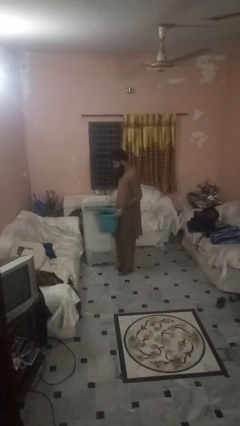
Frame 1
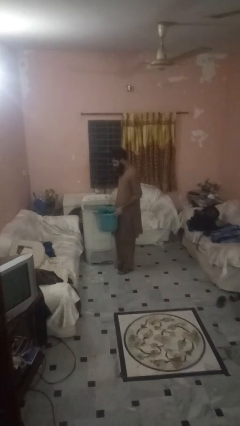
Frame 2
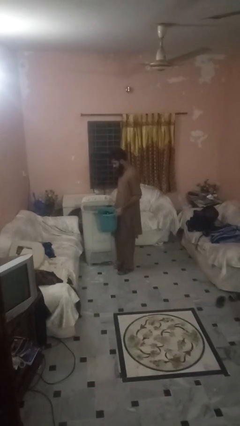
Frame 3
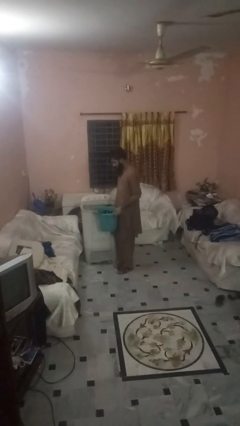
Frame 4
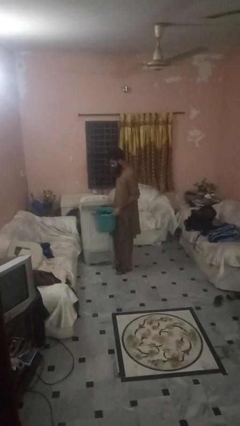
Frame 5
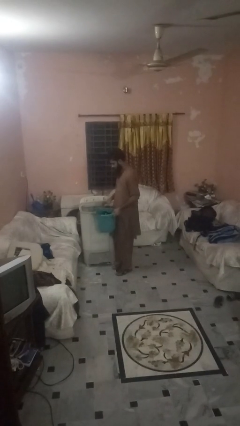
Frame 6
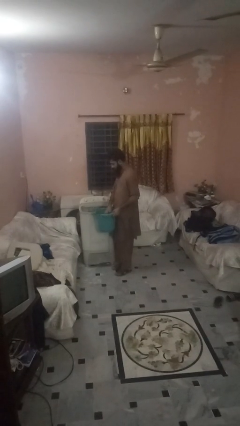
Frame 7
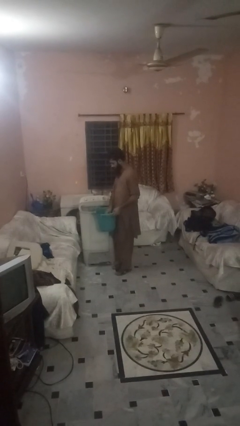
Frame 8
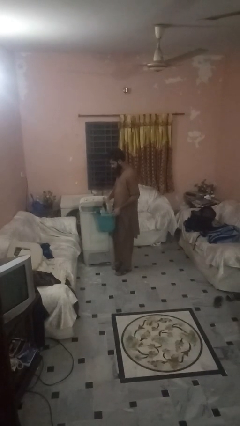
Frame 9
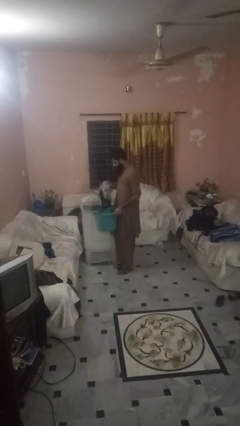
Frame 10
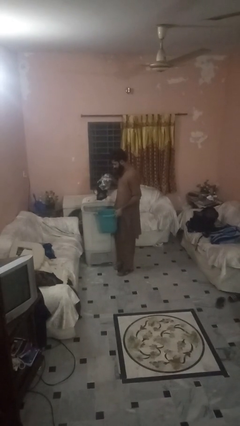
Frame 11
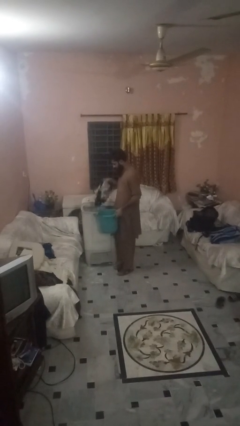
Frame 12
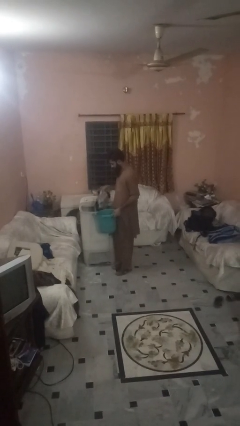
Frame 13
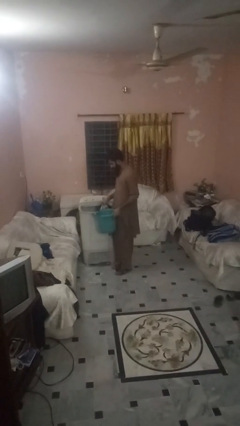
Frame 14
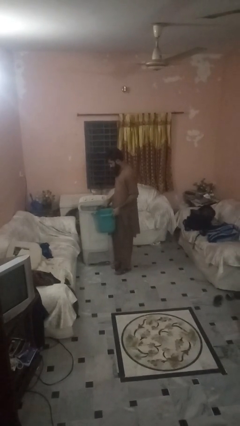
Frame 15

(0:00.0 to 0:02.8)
person loads clotheswasher

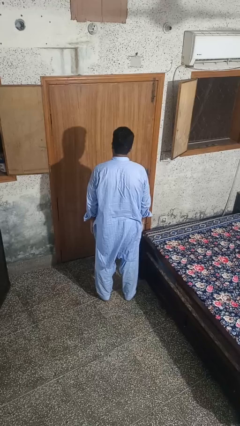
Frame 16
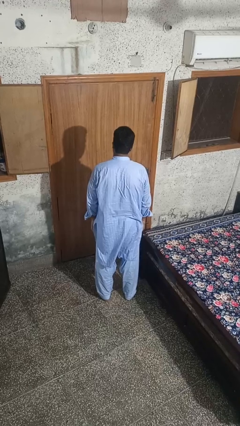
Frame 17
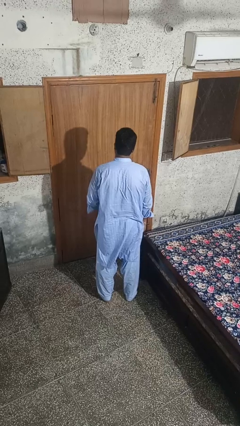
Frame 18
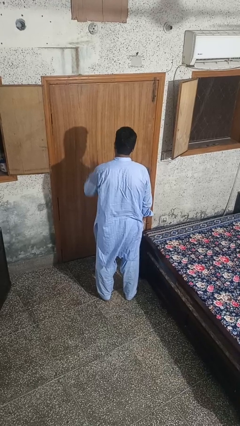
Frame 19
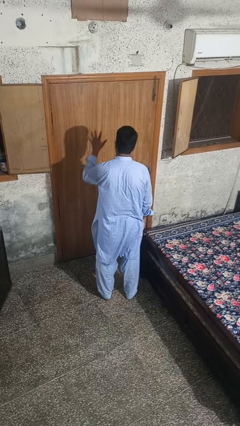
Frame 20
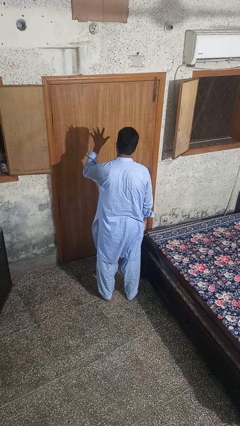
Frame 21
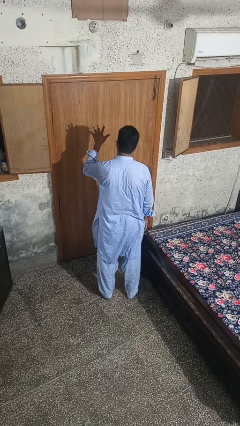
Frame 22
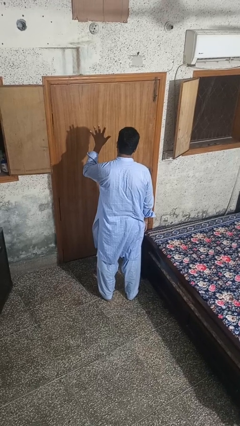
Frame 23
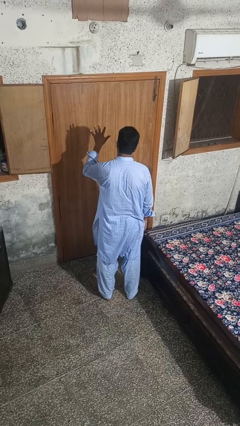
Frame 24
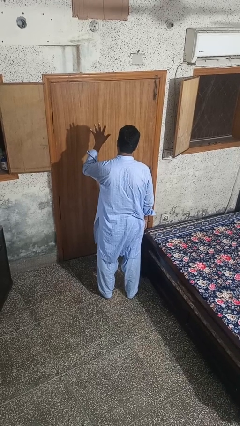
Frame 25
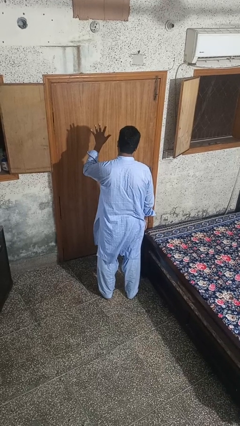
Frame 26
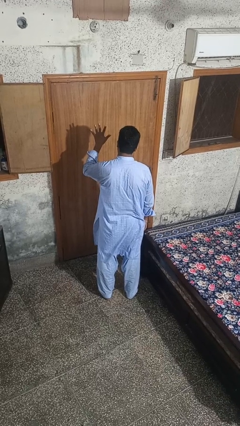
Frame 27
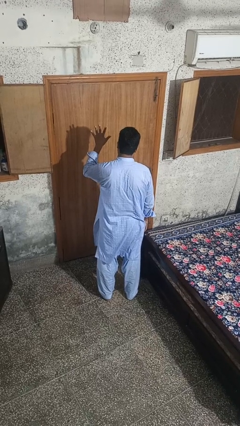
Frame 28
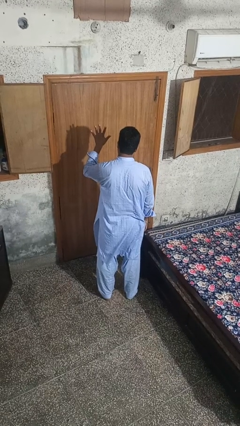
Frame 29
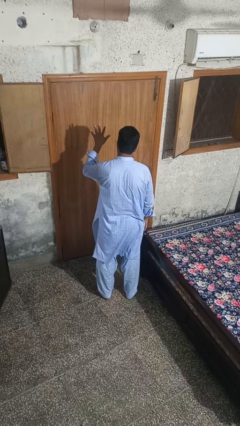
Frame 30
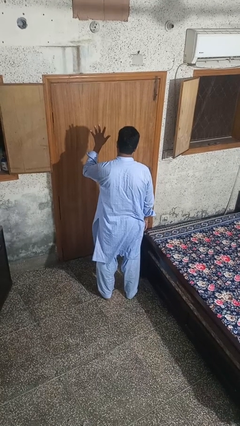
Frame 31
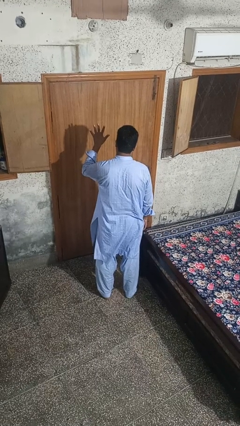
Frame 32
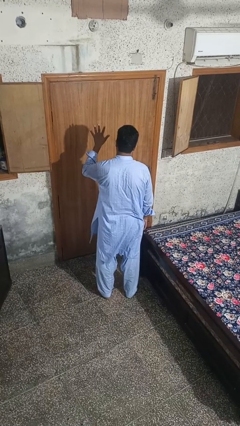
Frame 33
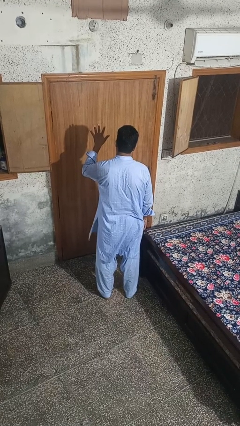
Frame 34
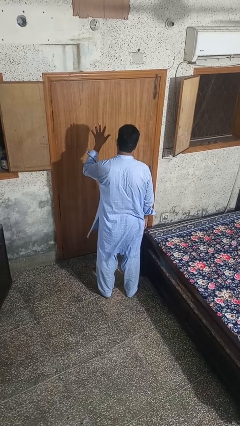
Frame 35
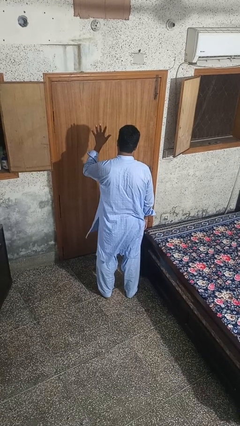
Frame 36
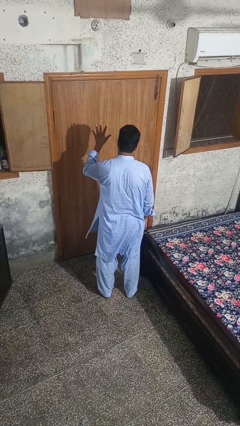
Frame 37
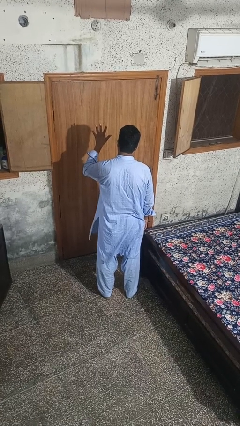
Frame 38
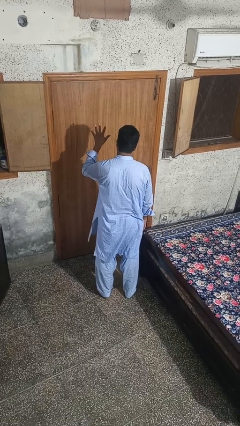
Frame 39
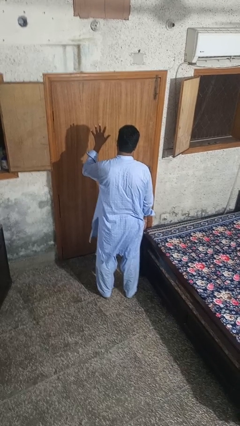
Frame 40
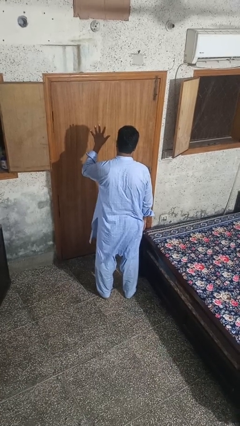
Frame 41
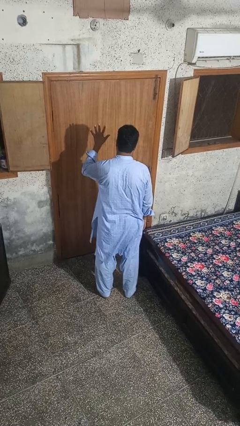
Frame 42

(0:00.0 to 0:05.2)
person gestures number five

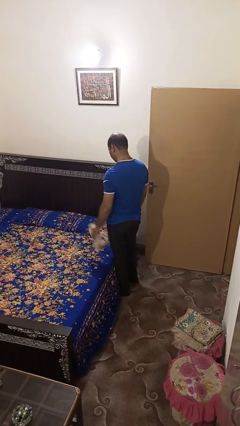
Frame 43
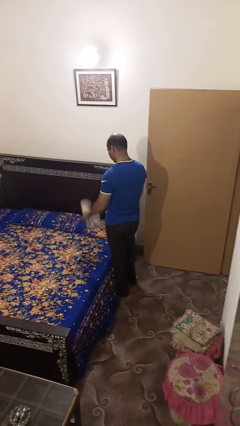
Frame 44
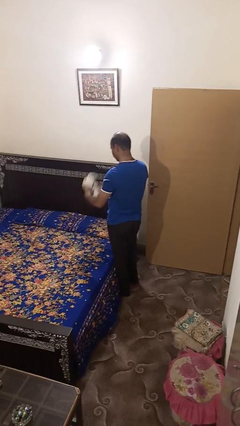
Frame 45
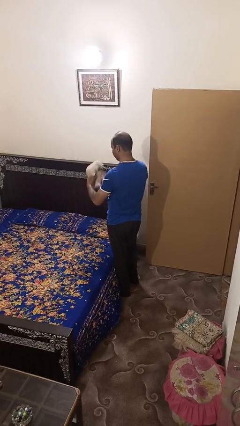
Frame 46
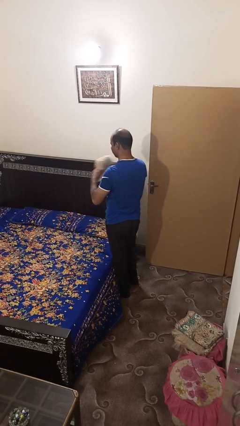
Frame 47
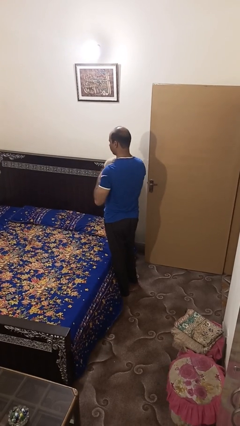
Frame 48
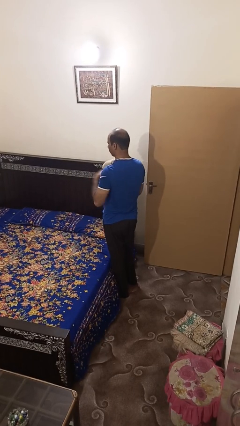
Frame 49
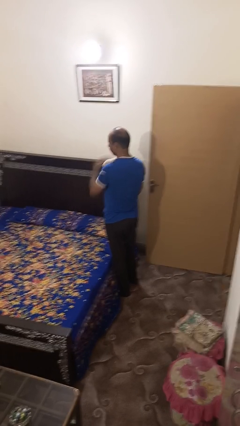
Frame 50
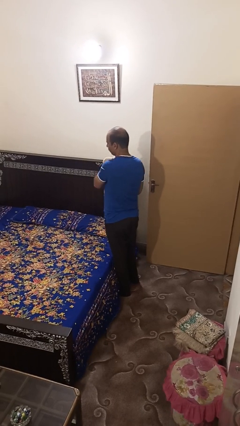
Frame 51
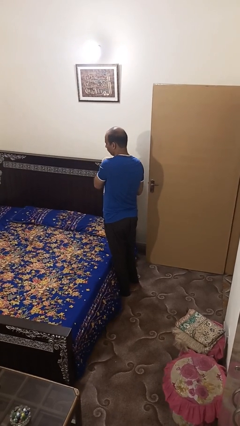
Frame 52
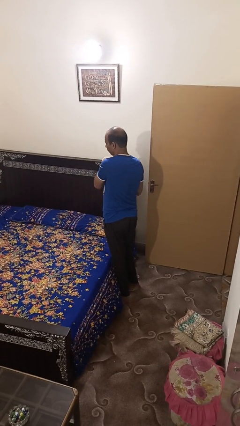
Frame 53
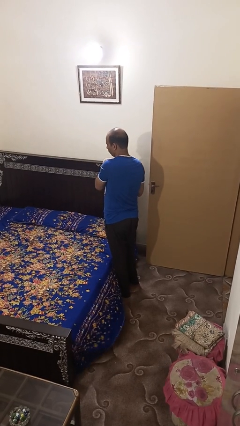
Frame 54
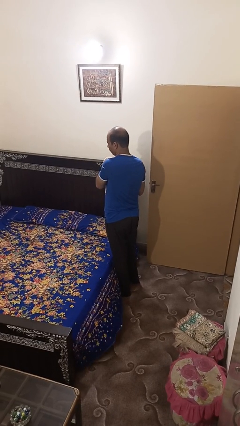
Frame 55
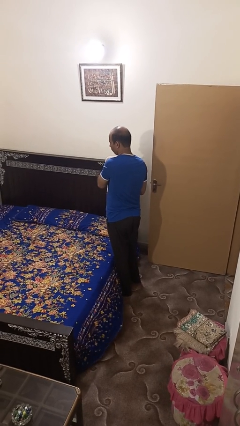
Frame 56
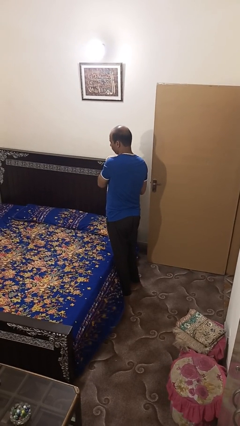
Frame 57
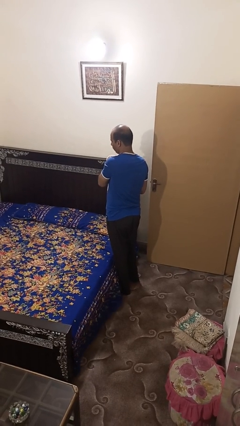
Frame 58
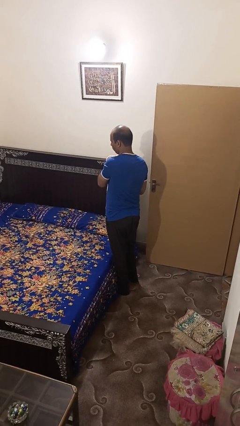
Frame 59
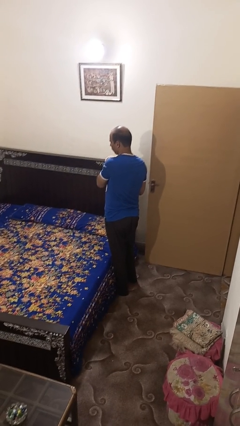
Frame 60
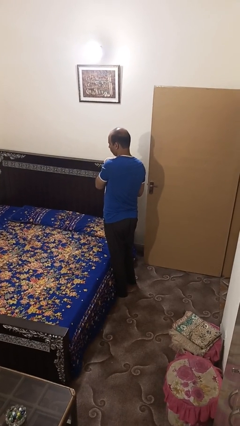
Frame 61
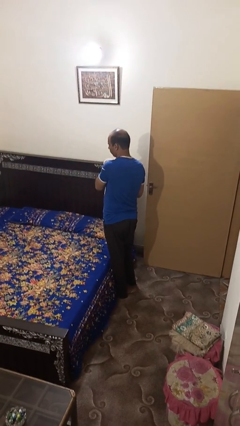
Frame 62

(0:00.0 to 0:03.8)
person hugs stuffed animal

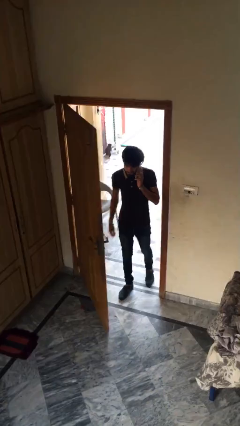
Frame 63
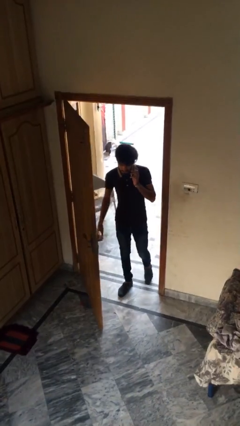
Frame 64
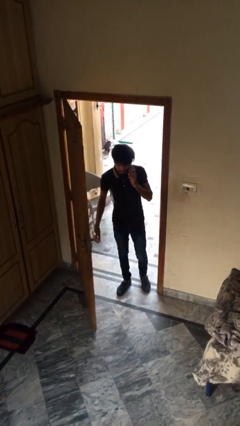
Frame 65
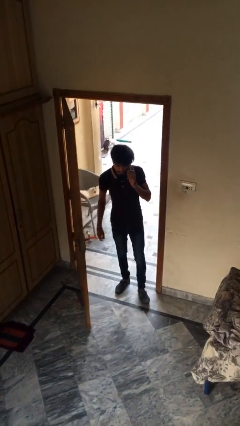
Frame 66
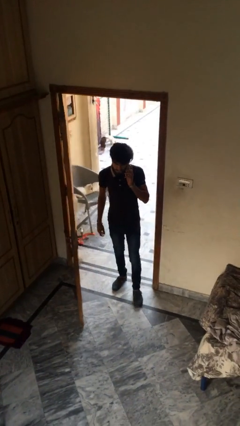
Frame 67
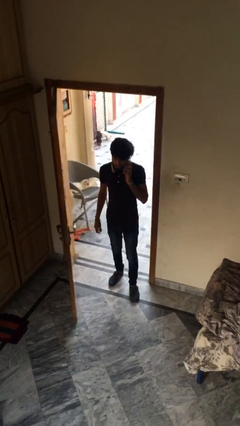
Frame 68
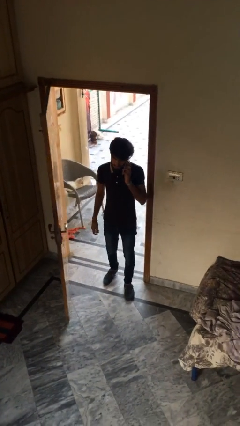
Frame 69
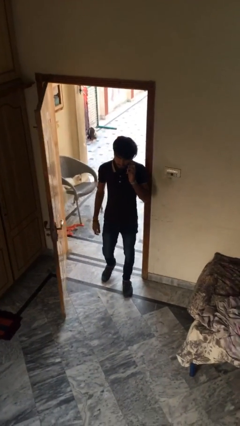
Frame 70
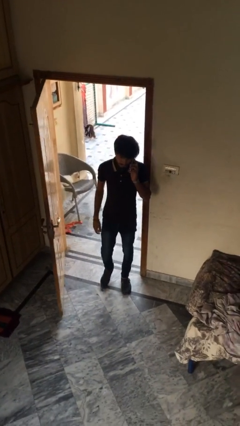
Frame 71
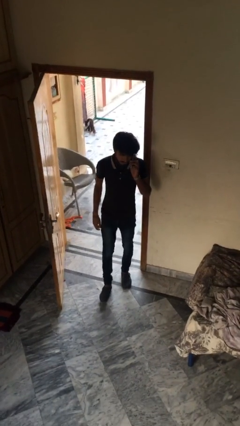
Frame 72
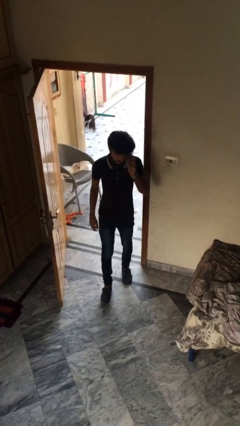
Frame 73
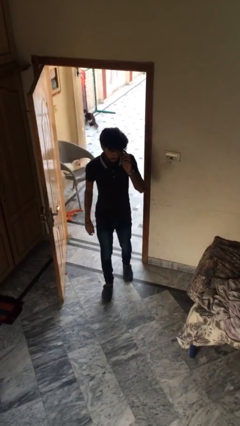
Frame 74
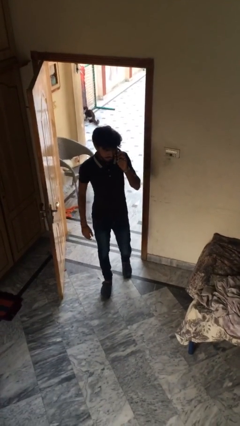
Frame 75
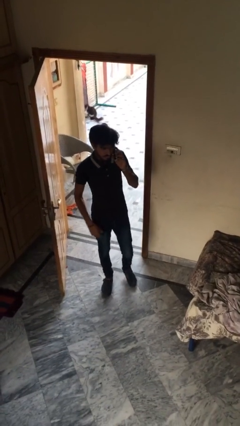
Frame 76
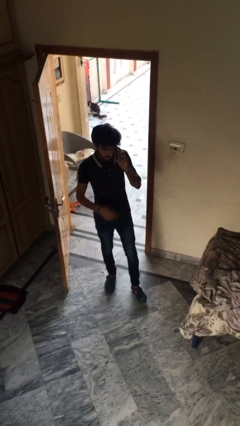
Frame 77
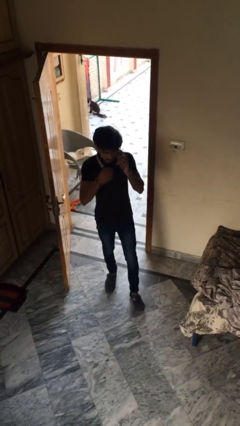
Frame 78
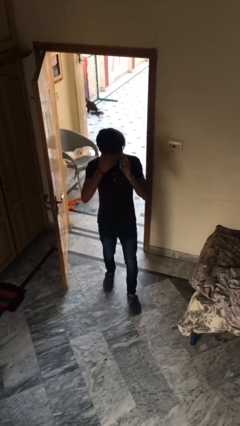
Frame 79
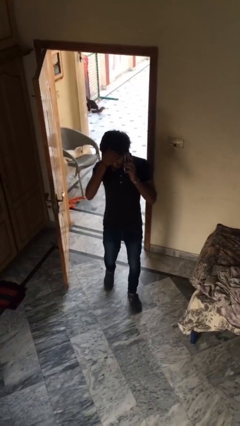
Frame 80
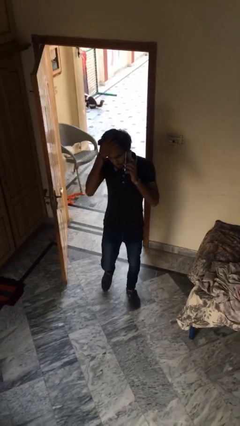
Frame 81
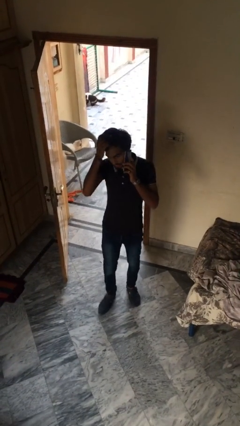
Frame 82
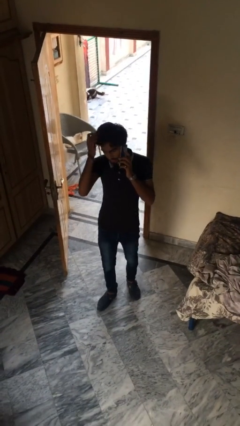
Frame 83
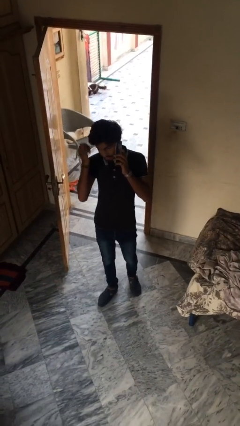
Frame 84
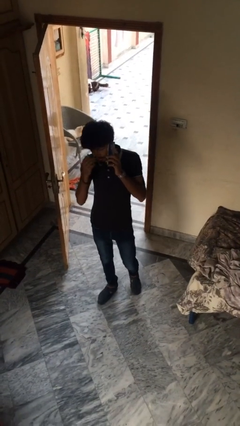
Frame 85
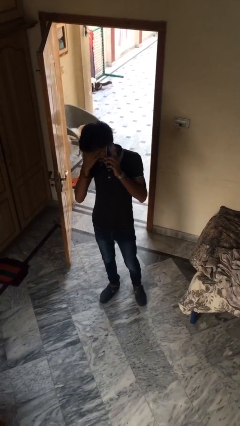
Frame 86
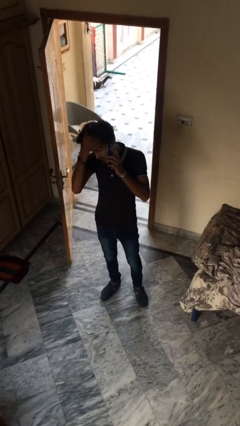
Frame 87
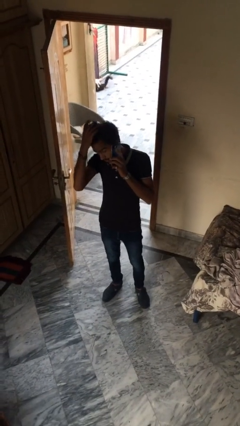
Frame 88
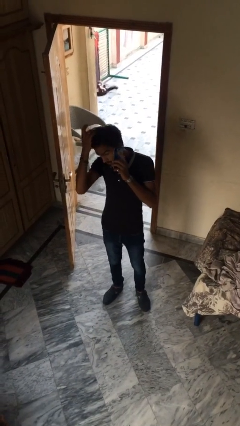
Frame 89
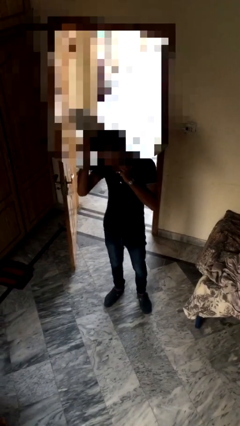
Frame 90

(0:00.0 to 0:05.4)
person enters scene through structure

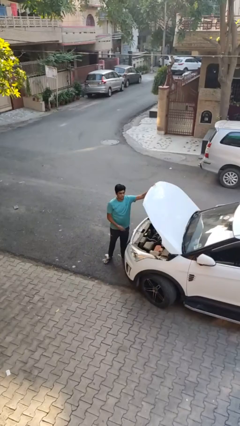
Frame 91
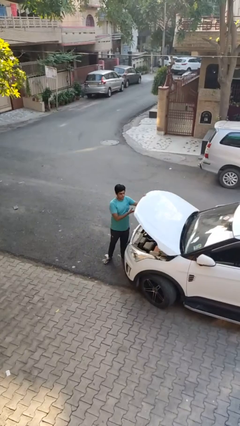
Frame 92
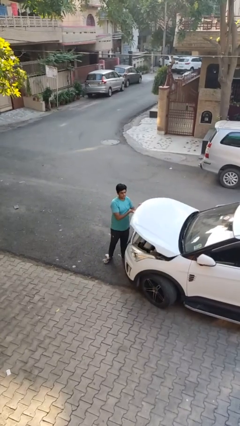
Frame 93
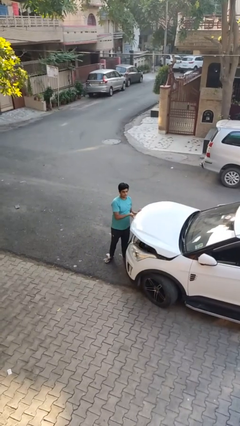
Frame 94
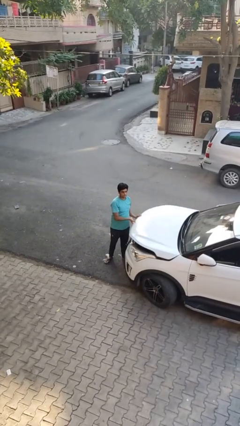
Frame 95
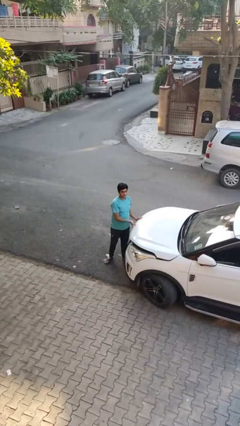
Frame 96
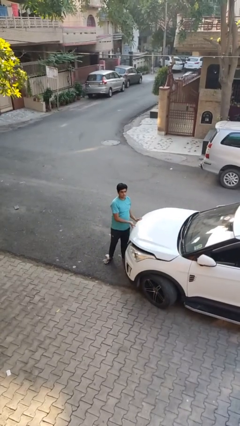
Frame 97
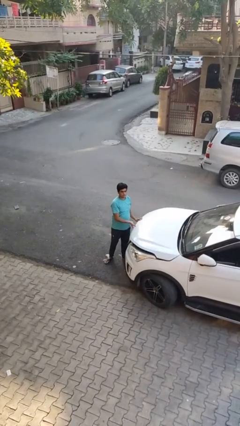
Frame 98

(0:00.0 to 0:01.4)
person closes car hood
